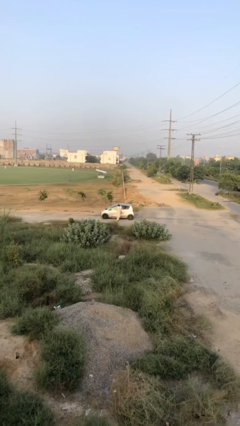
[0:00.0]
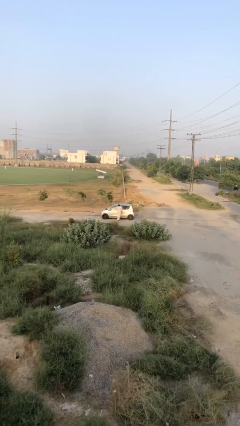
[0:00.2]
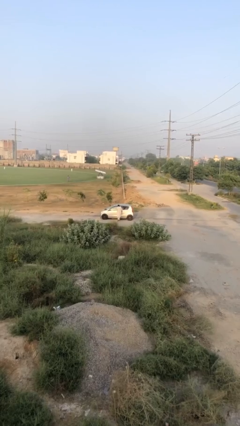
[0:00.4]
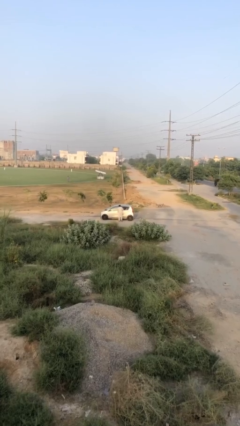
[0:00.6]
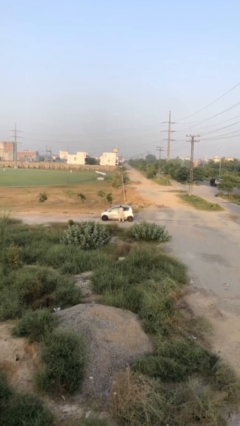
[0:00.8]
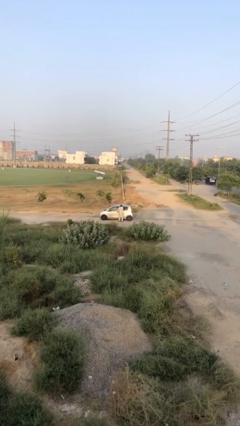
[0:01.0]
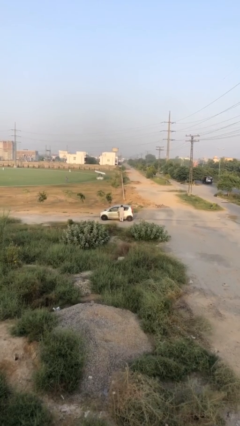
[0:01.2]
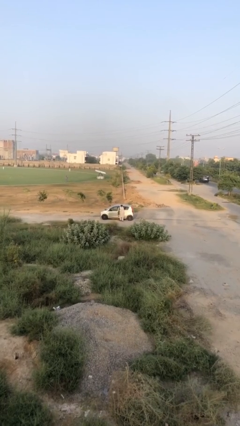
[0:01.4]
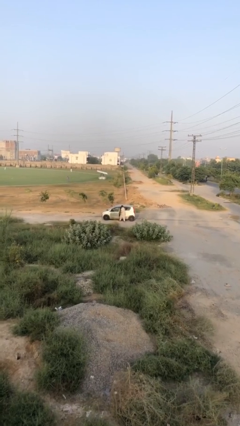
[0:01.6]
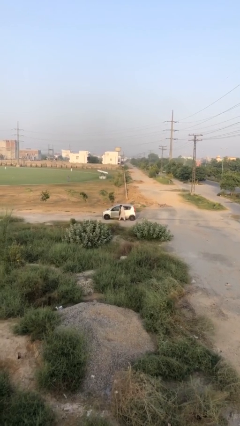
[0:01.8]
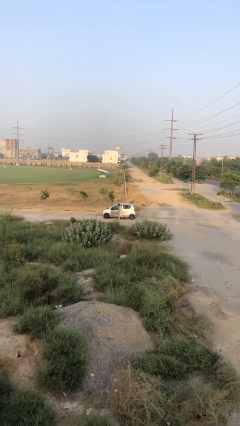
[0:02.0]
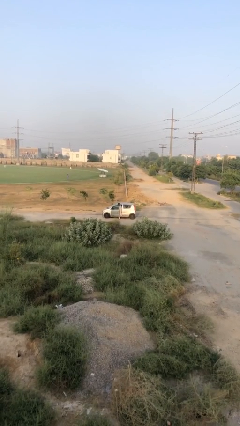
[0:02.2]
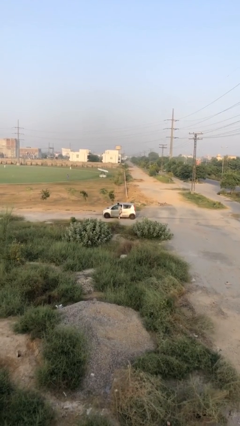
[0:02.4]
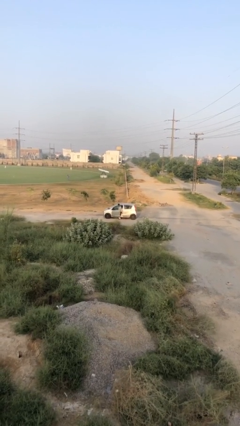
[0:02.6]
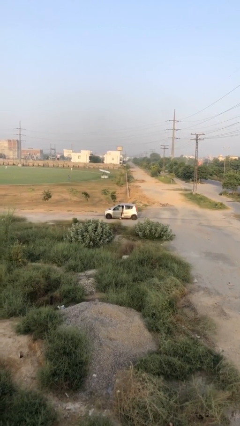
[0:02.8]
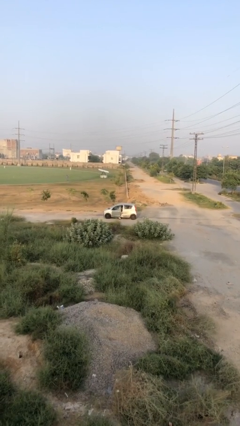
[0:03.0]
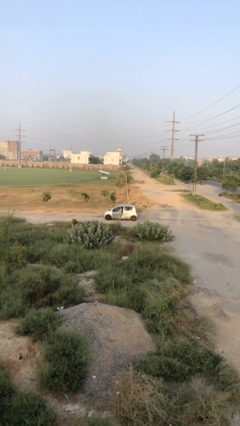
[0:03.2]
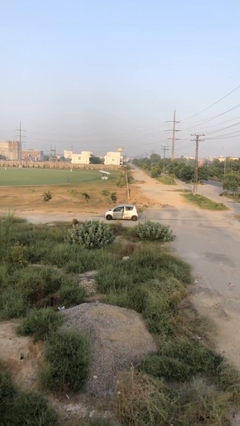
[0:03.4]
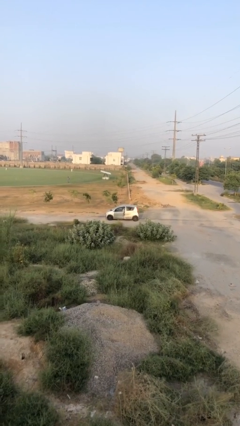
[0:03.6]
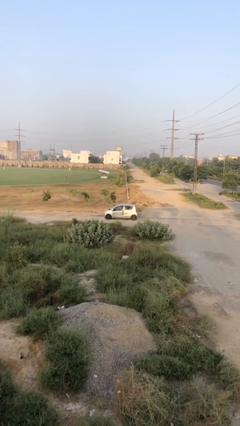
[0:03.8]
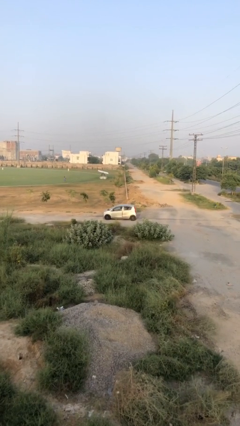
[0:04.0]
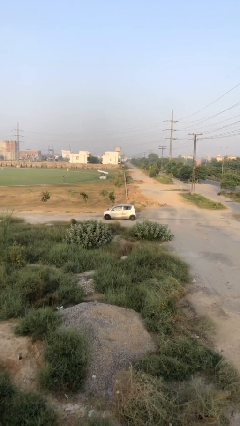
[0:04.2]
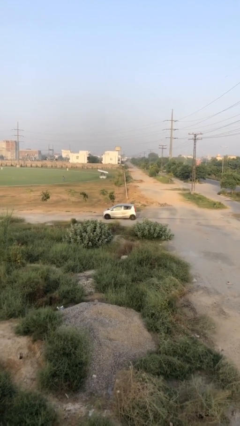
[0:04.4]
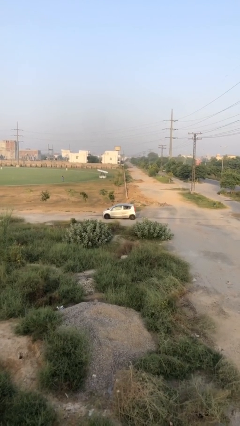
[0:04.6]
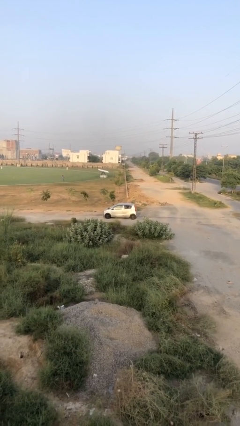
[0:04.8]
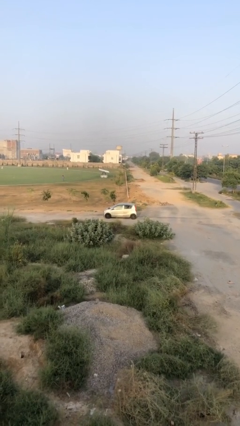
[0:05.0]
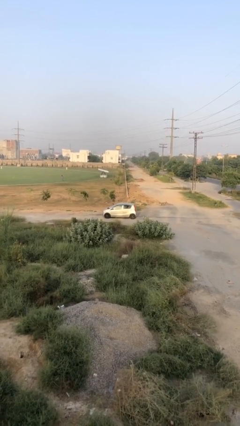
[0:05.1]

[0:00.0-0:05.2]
car picks up person

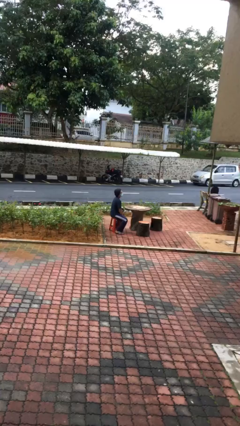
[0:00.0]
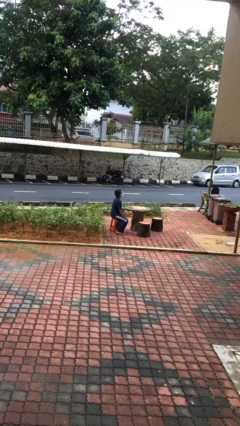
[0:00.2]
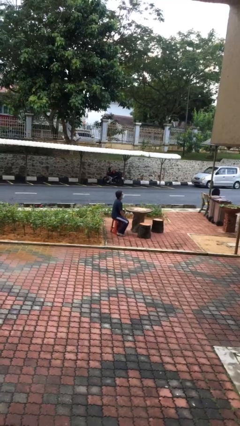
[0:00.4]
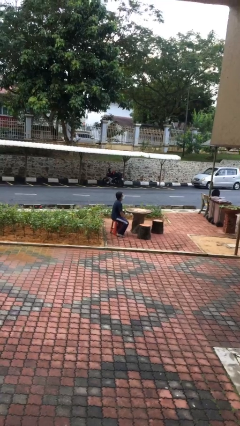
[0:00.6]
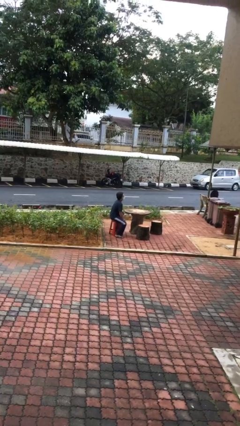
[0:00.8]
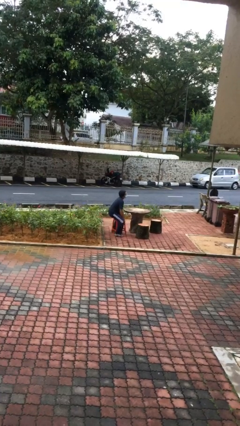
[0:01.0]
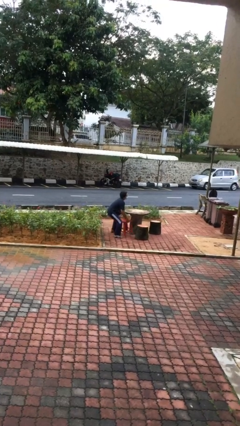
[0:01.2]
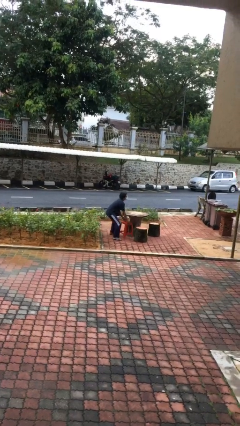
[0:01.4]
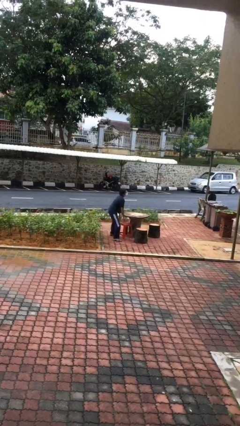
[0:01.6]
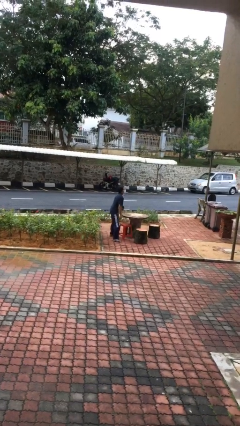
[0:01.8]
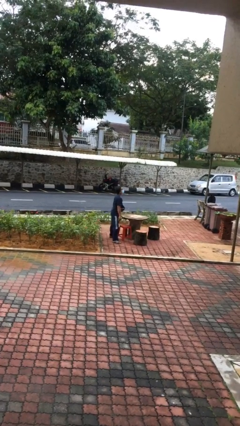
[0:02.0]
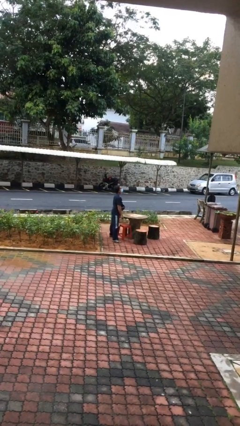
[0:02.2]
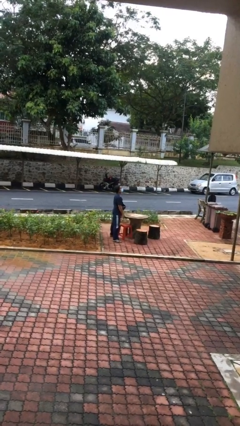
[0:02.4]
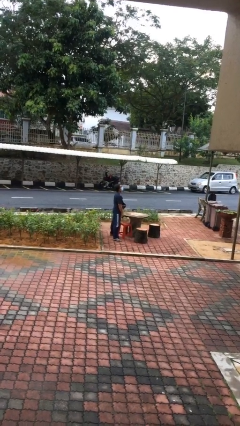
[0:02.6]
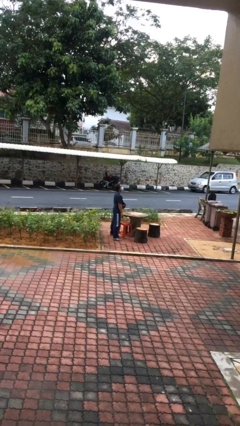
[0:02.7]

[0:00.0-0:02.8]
person stands up

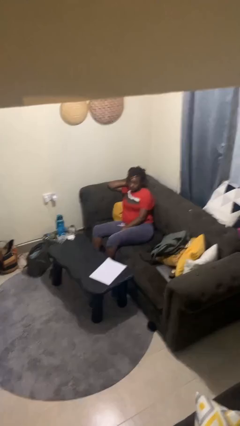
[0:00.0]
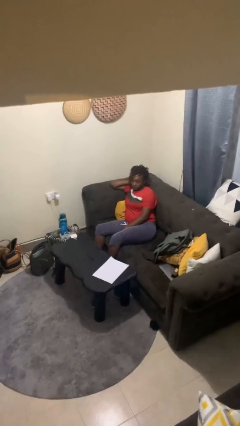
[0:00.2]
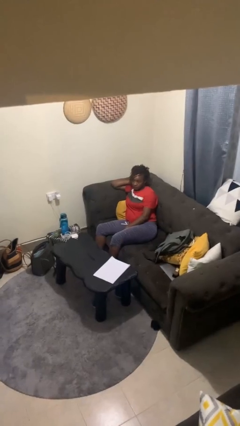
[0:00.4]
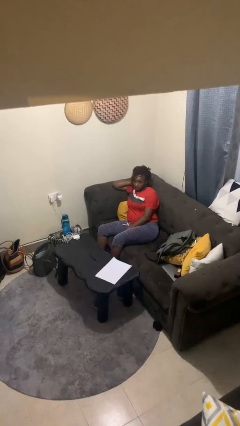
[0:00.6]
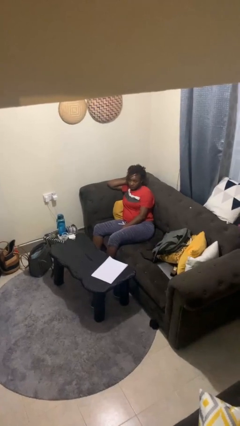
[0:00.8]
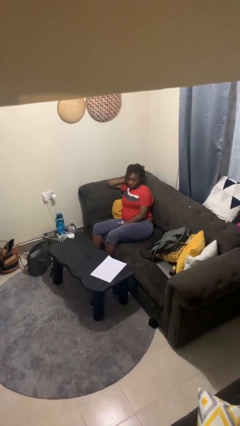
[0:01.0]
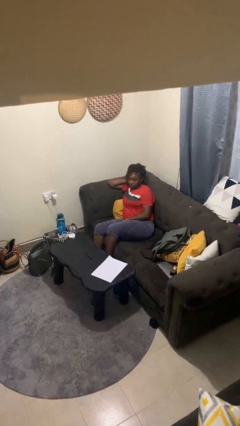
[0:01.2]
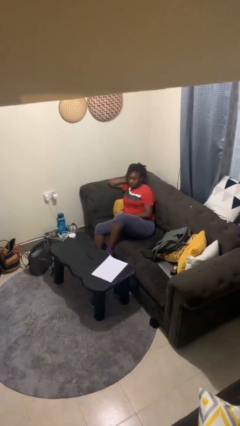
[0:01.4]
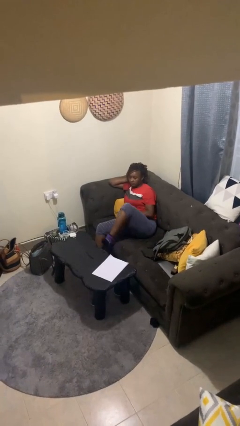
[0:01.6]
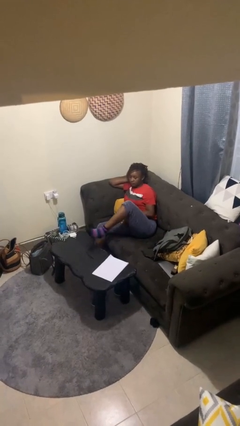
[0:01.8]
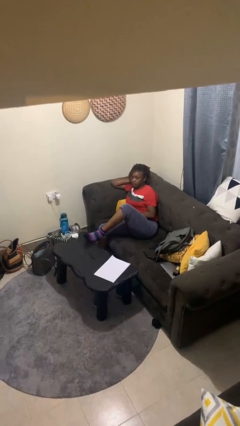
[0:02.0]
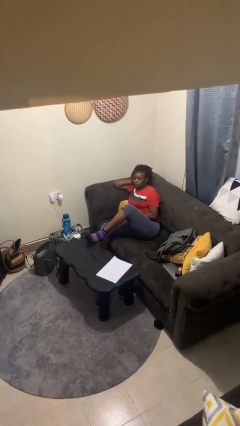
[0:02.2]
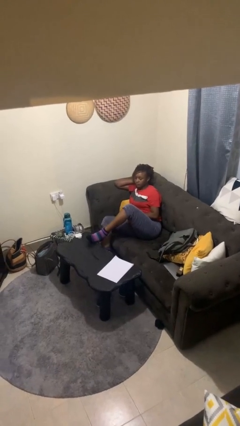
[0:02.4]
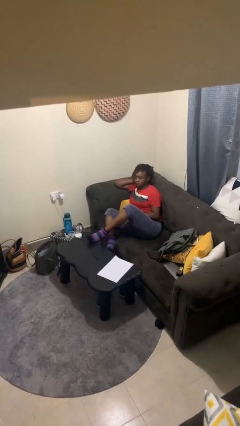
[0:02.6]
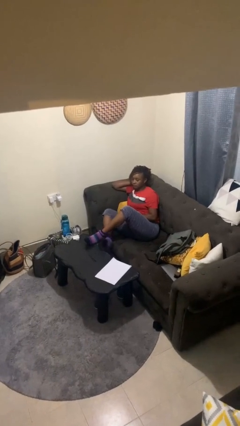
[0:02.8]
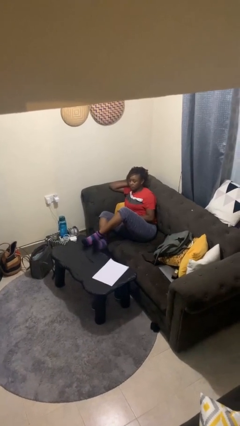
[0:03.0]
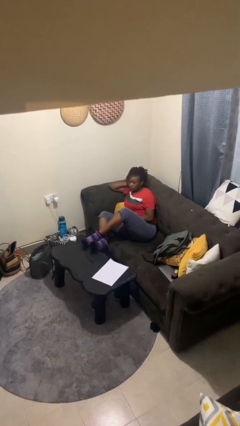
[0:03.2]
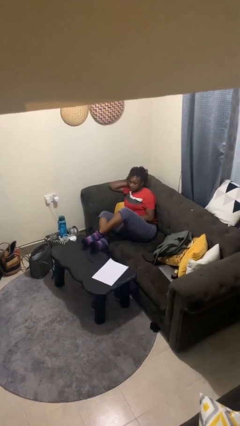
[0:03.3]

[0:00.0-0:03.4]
person puts feet up

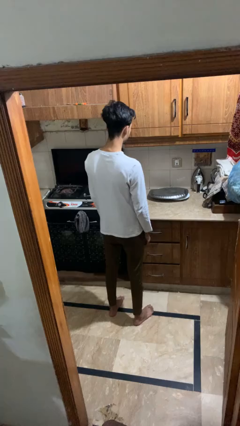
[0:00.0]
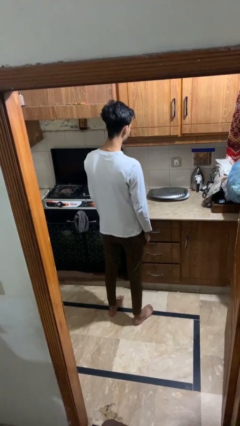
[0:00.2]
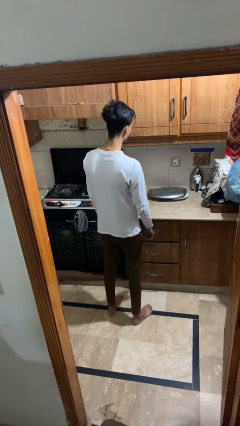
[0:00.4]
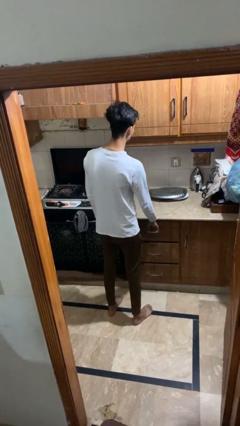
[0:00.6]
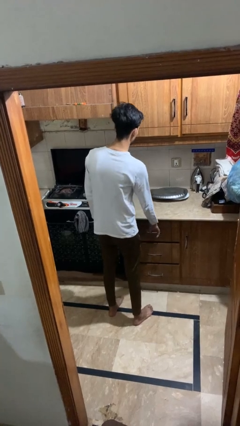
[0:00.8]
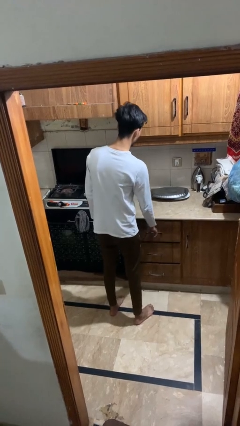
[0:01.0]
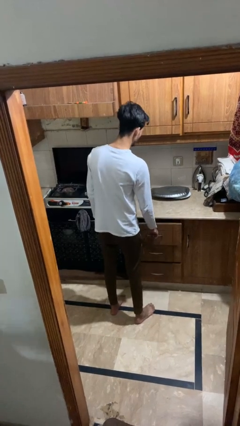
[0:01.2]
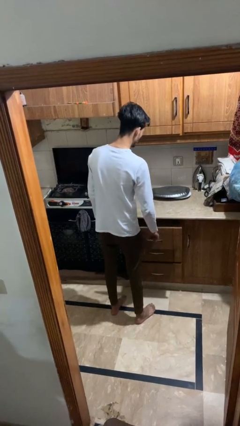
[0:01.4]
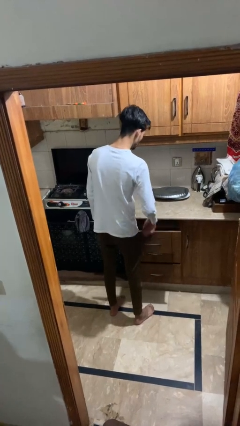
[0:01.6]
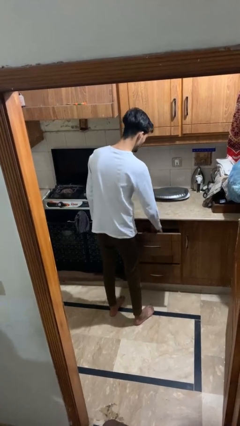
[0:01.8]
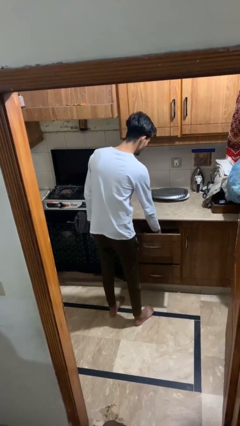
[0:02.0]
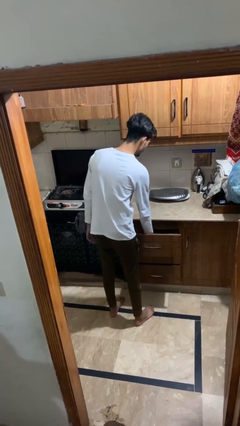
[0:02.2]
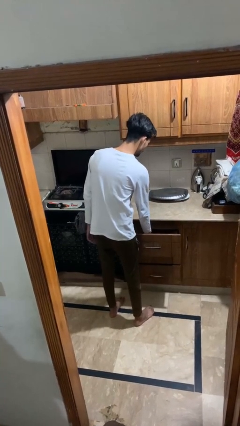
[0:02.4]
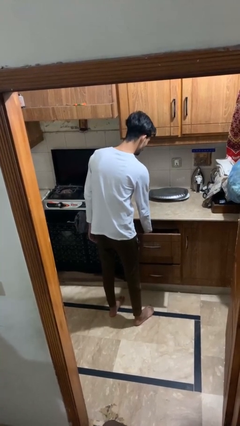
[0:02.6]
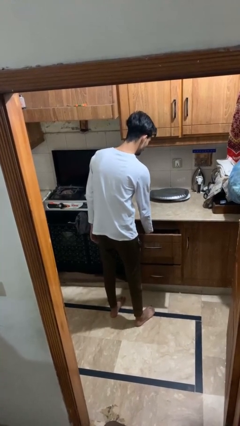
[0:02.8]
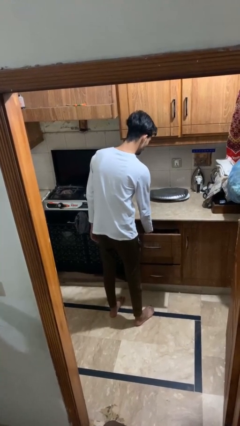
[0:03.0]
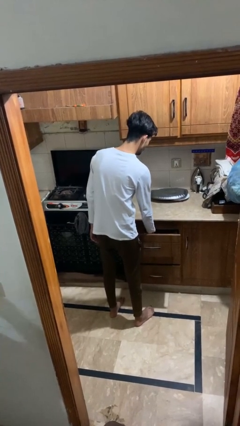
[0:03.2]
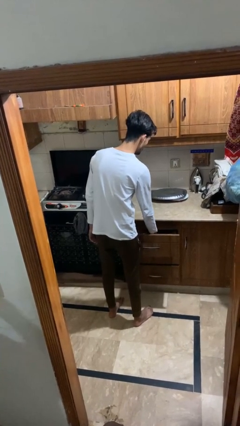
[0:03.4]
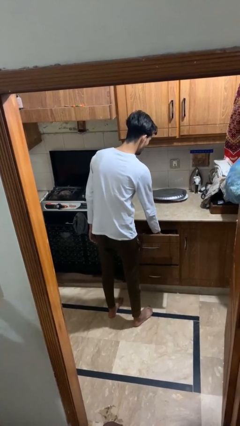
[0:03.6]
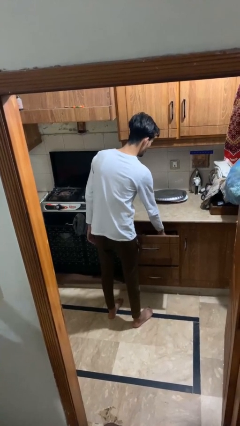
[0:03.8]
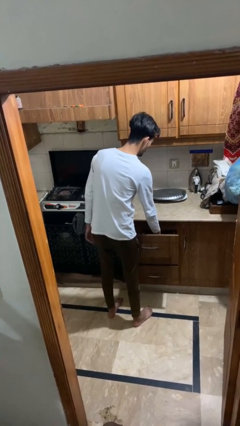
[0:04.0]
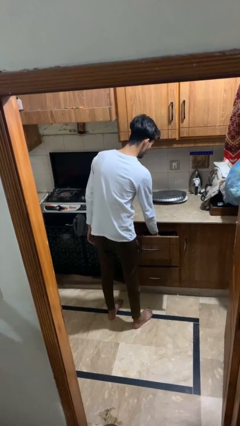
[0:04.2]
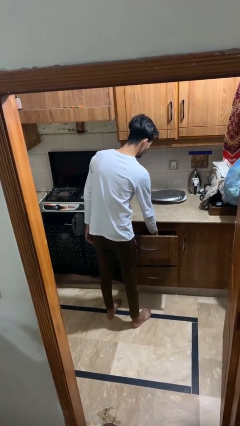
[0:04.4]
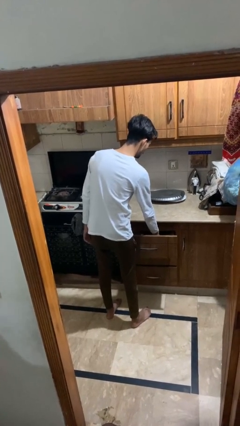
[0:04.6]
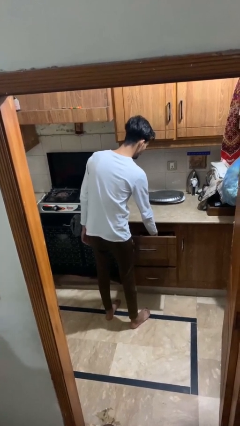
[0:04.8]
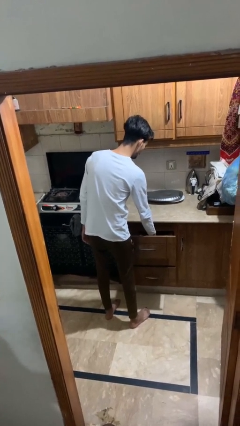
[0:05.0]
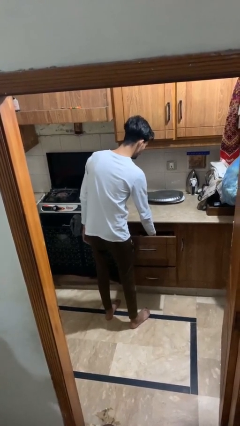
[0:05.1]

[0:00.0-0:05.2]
person searches in kitchen drawer

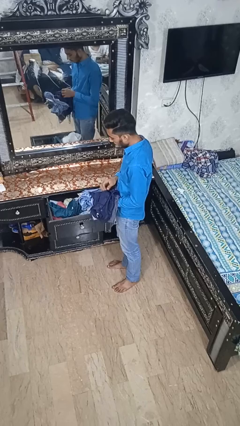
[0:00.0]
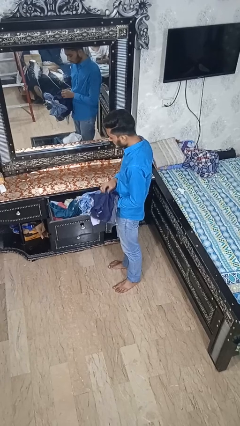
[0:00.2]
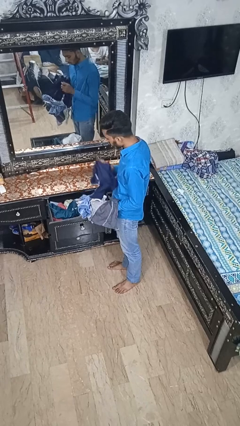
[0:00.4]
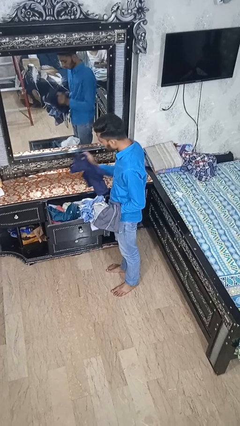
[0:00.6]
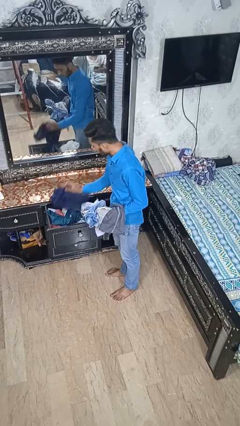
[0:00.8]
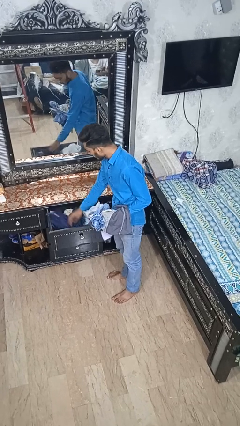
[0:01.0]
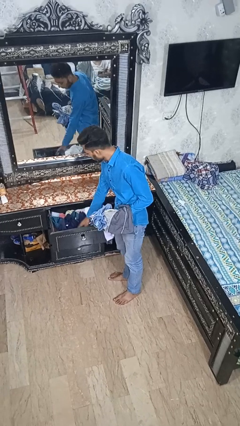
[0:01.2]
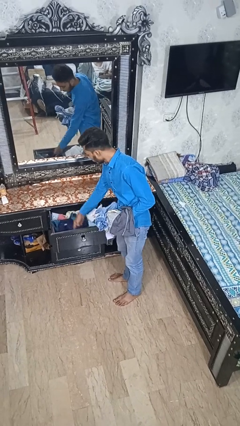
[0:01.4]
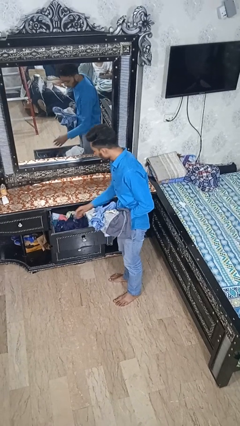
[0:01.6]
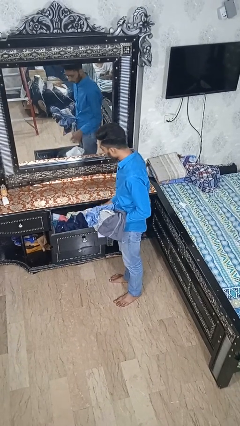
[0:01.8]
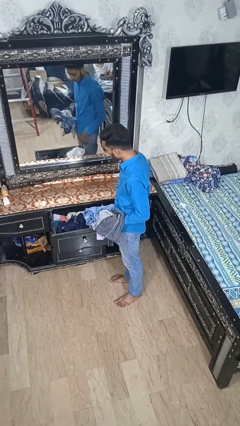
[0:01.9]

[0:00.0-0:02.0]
person puts clothes into dresser
